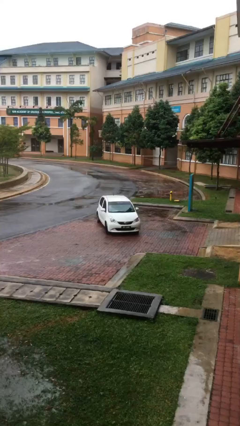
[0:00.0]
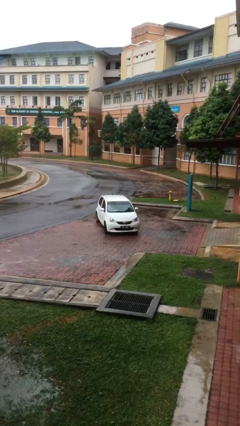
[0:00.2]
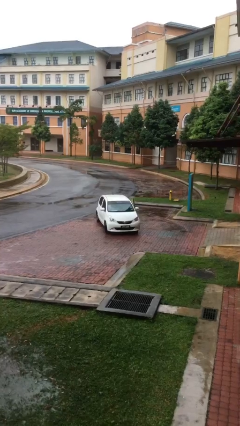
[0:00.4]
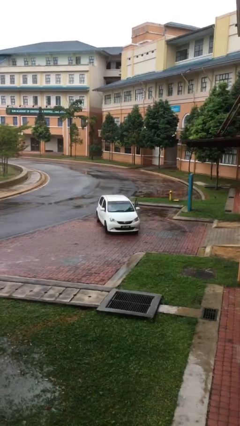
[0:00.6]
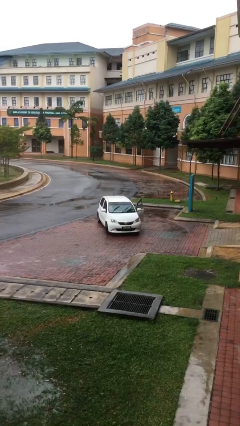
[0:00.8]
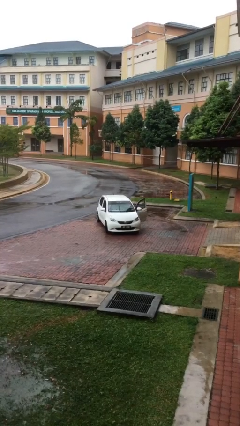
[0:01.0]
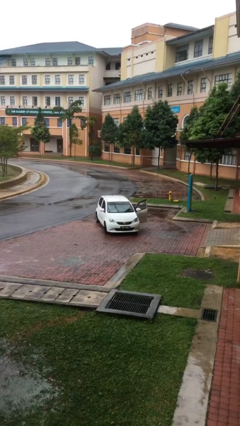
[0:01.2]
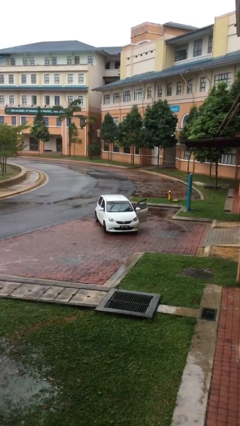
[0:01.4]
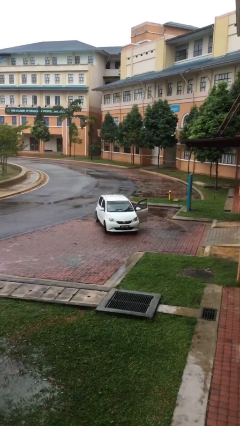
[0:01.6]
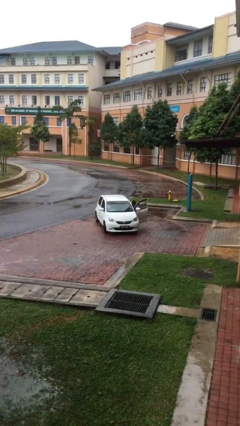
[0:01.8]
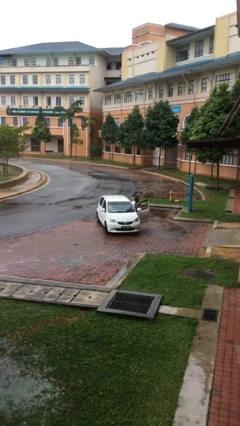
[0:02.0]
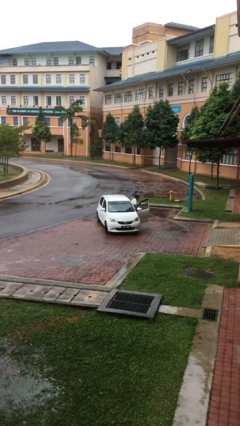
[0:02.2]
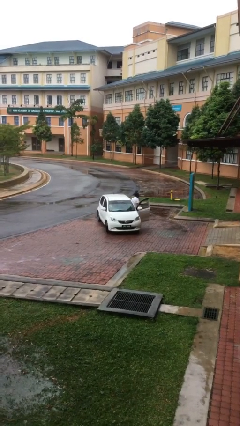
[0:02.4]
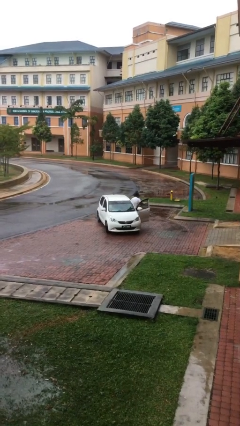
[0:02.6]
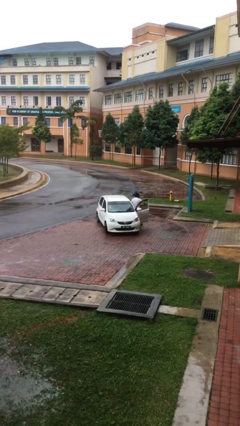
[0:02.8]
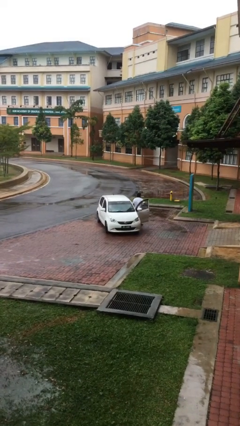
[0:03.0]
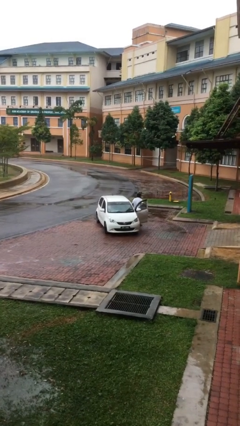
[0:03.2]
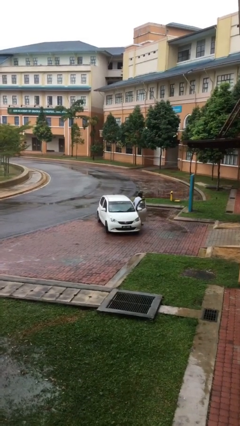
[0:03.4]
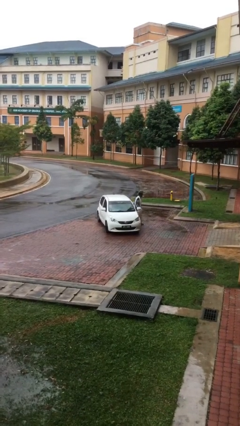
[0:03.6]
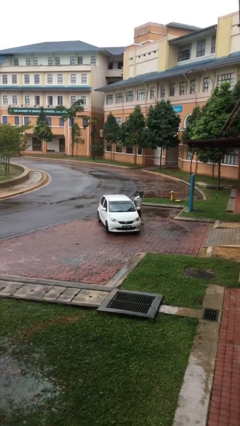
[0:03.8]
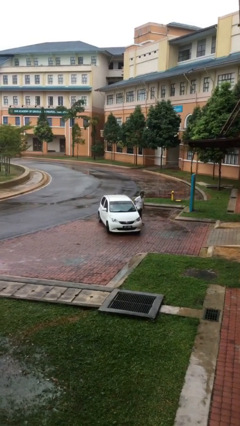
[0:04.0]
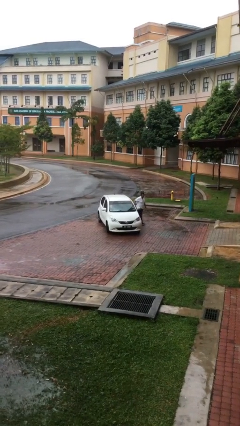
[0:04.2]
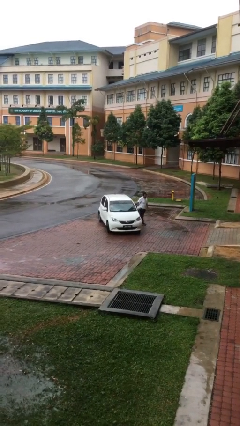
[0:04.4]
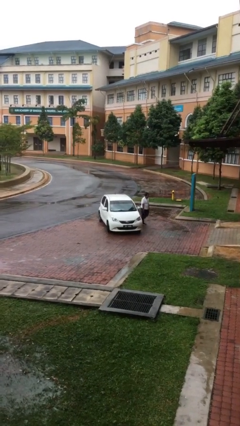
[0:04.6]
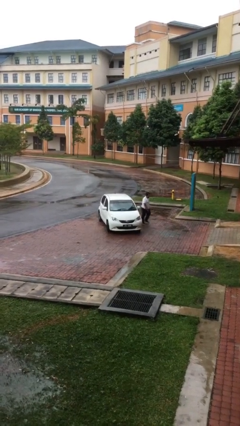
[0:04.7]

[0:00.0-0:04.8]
car drops off person

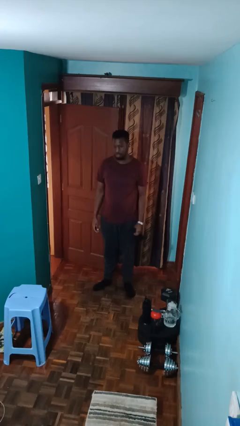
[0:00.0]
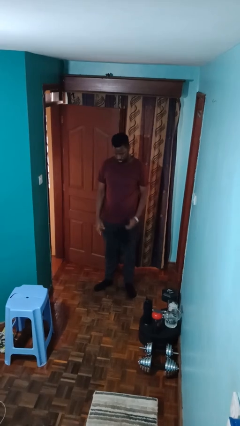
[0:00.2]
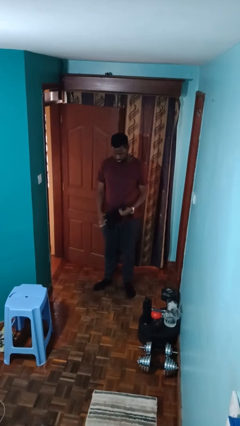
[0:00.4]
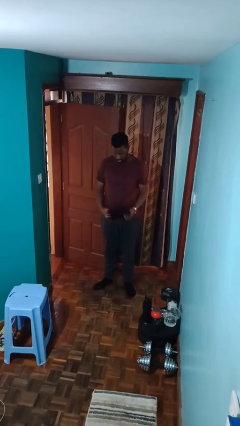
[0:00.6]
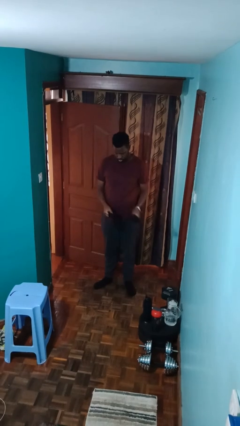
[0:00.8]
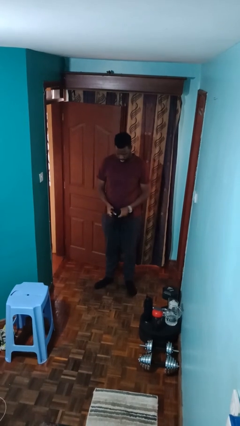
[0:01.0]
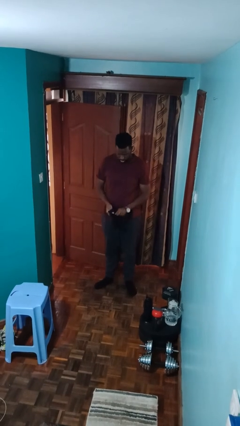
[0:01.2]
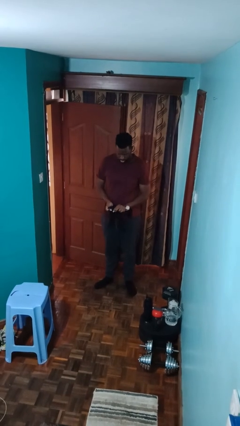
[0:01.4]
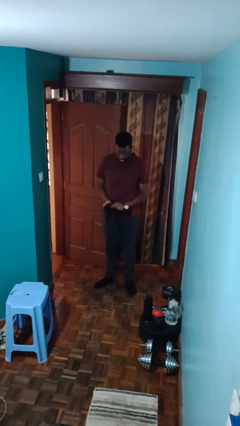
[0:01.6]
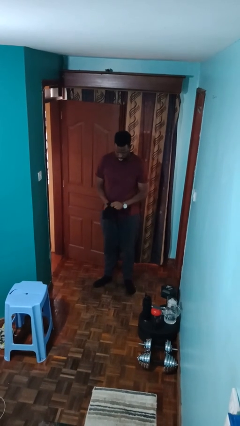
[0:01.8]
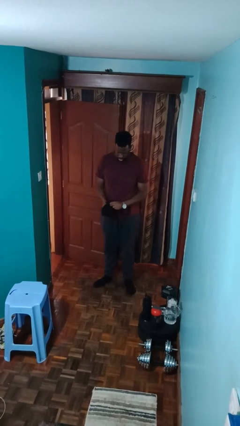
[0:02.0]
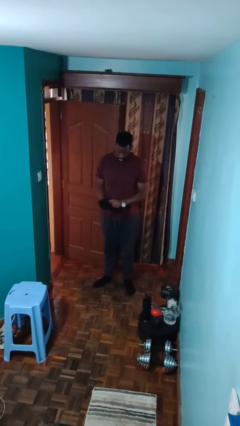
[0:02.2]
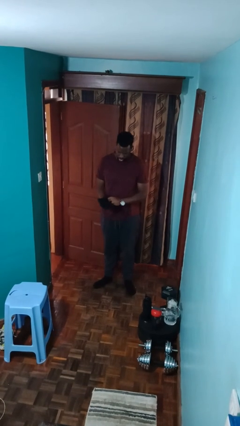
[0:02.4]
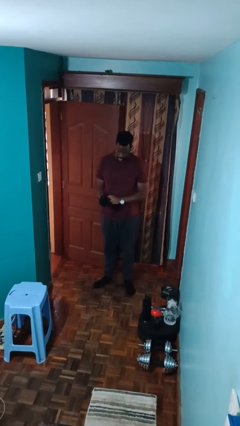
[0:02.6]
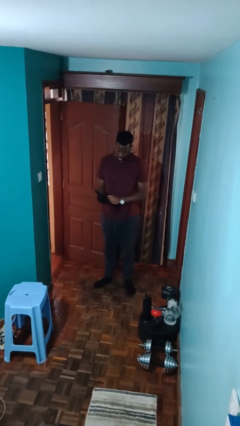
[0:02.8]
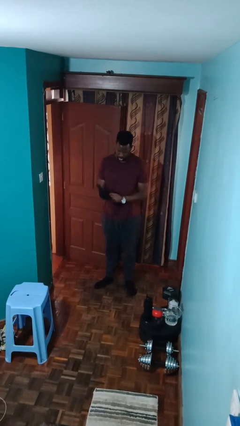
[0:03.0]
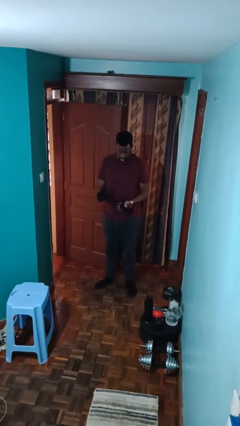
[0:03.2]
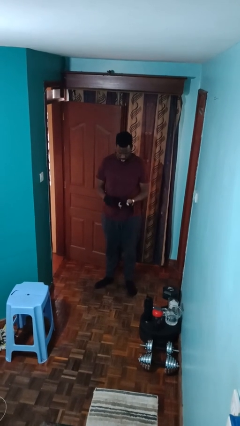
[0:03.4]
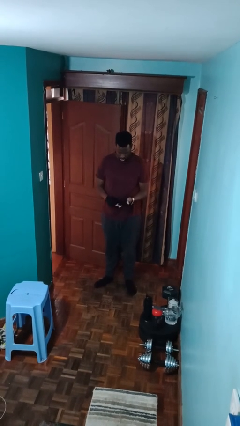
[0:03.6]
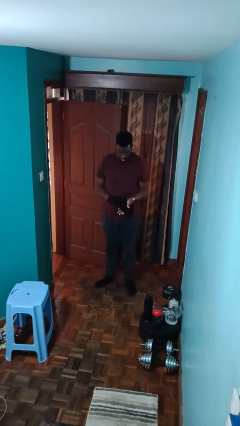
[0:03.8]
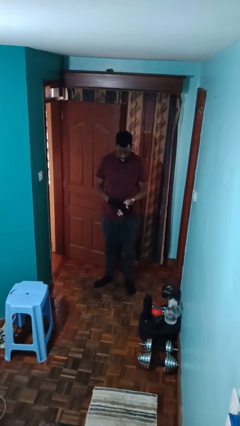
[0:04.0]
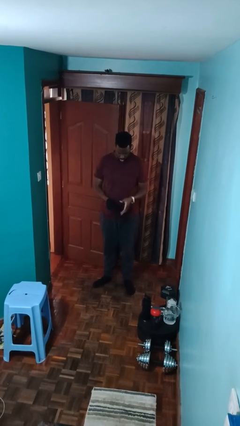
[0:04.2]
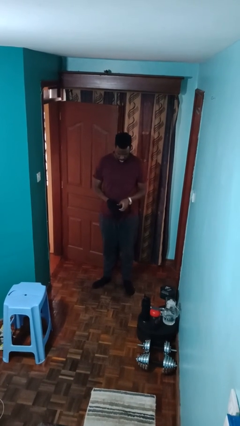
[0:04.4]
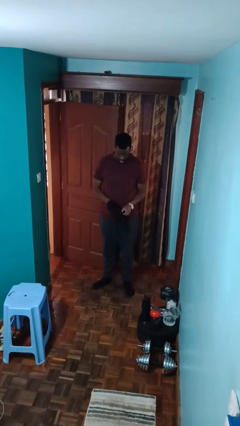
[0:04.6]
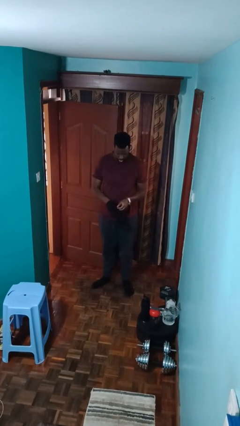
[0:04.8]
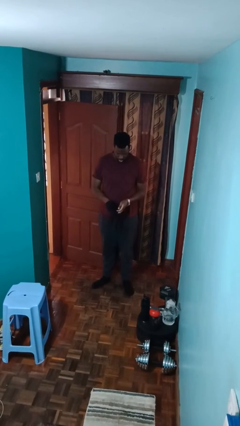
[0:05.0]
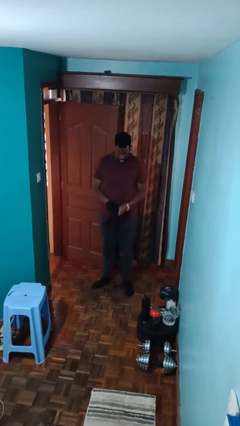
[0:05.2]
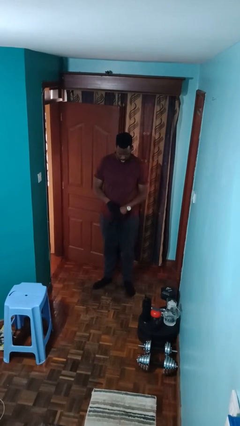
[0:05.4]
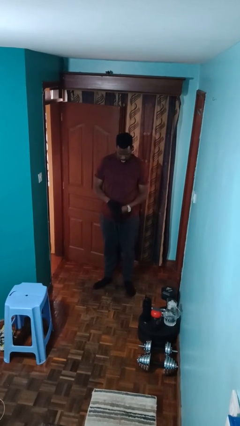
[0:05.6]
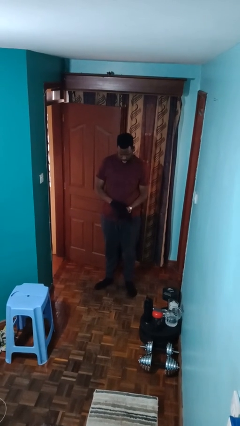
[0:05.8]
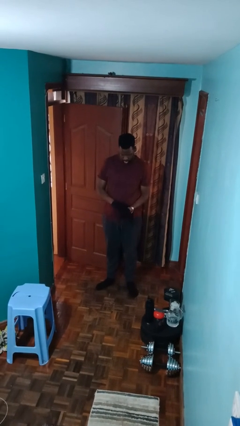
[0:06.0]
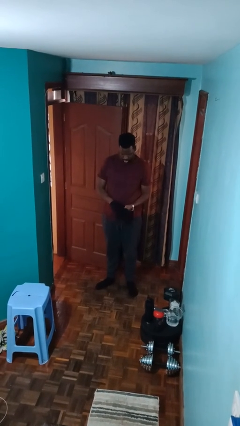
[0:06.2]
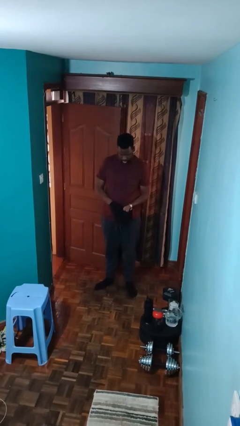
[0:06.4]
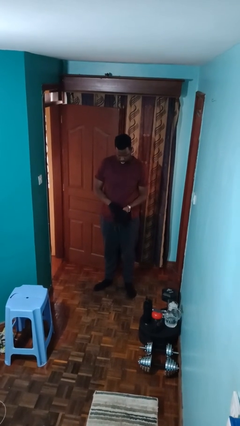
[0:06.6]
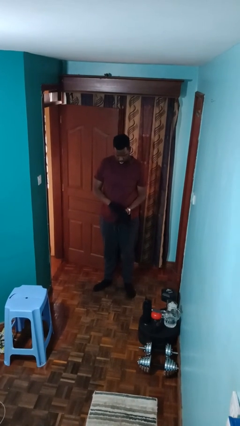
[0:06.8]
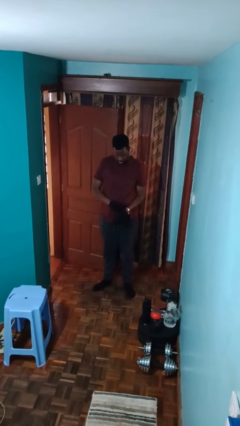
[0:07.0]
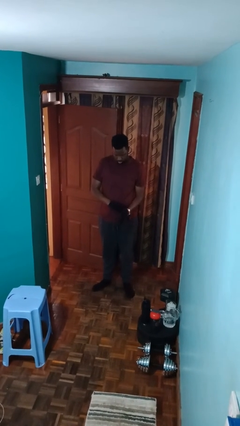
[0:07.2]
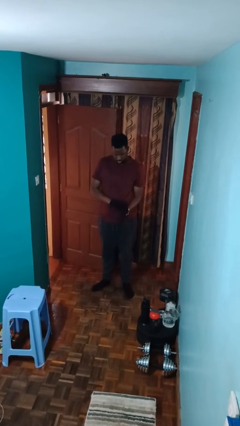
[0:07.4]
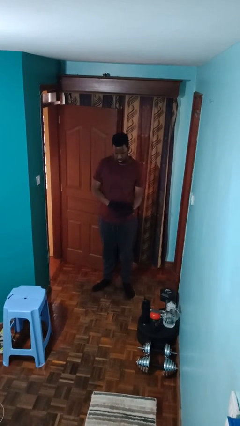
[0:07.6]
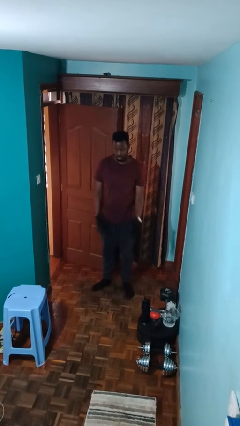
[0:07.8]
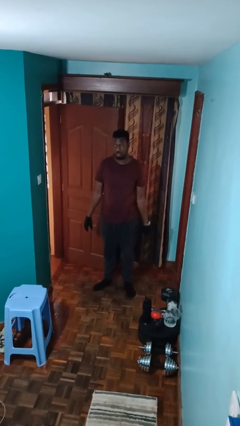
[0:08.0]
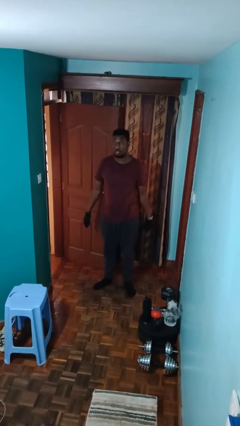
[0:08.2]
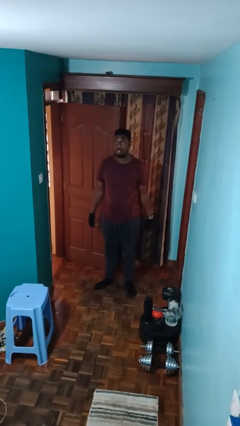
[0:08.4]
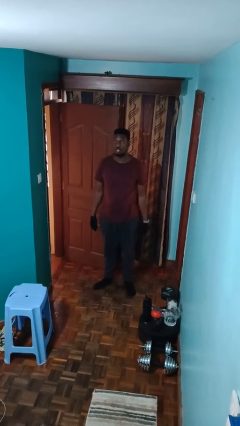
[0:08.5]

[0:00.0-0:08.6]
person puts on gloves

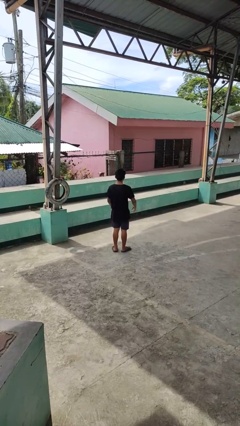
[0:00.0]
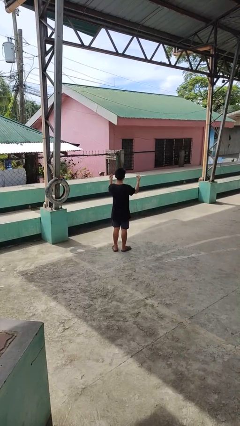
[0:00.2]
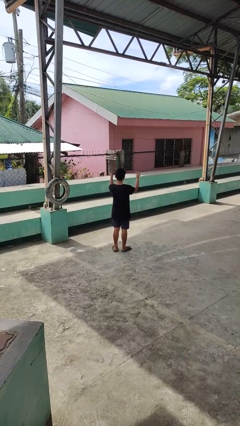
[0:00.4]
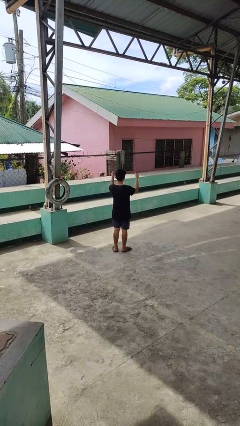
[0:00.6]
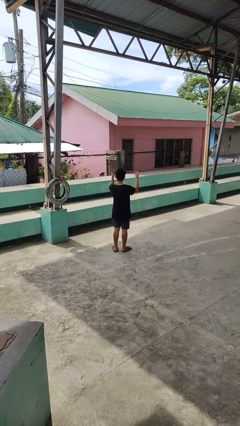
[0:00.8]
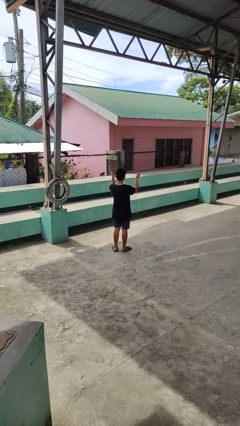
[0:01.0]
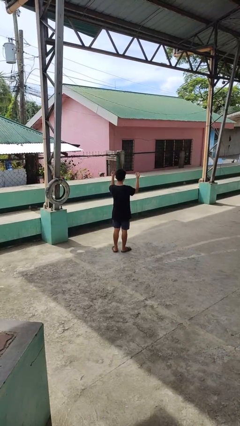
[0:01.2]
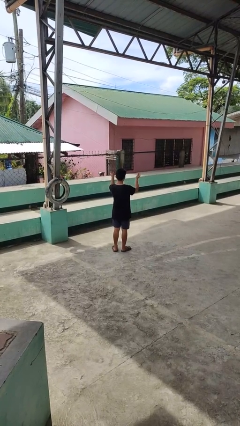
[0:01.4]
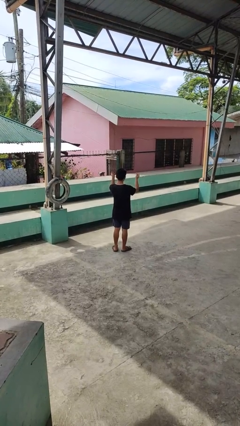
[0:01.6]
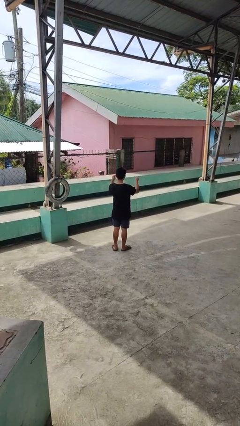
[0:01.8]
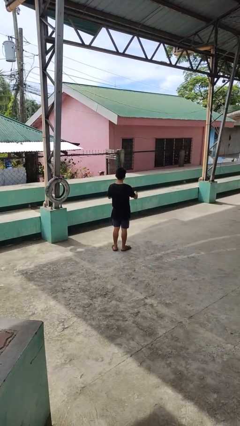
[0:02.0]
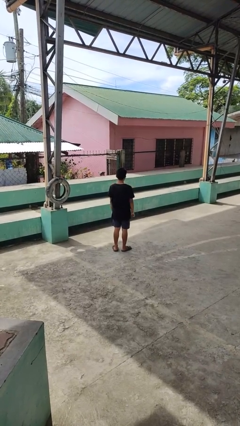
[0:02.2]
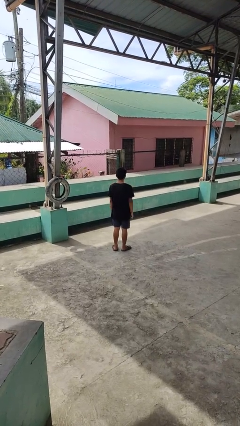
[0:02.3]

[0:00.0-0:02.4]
person snaps fingers

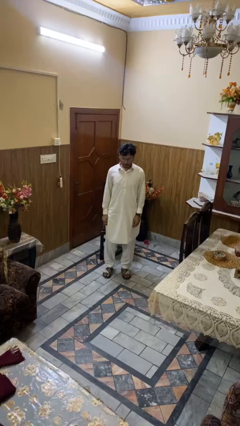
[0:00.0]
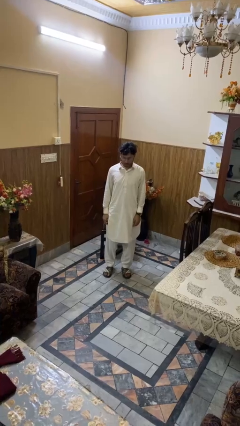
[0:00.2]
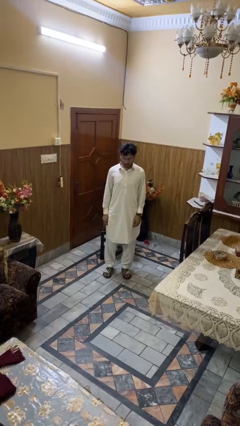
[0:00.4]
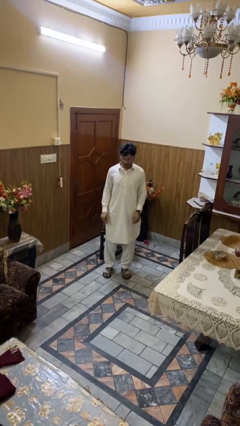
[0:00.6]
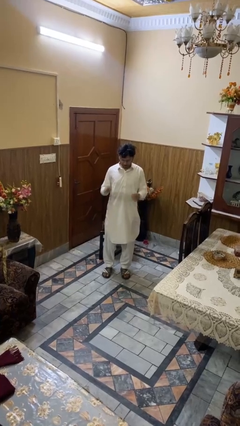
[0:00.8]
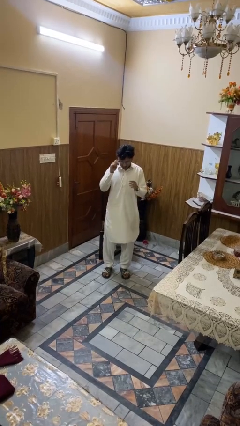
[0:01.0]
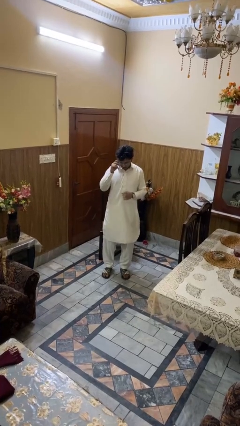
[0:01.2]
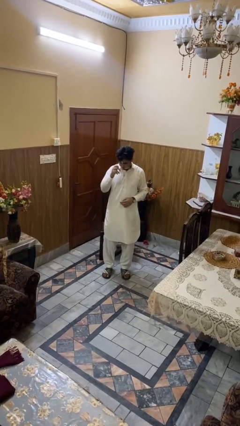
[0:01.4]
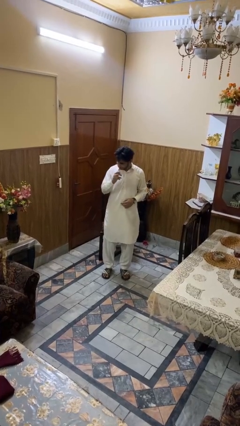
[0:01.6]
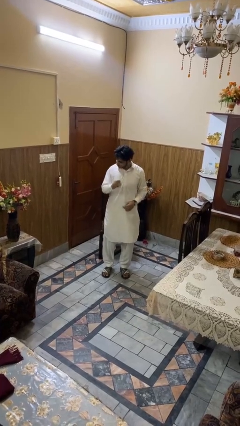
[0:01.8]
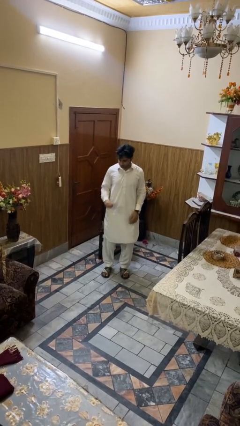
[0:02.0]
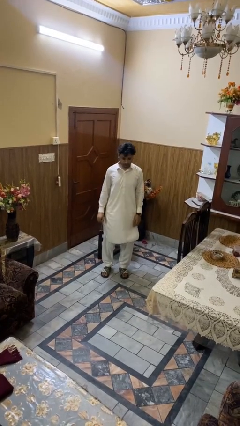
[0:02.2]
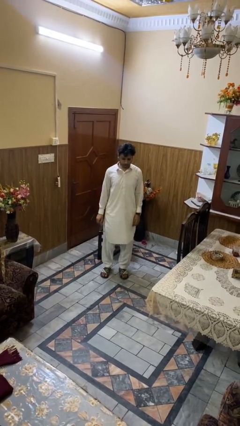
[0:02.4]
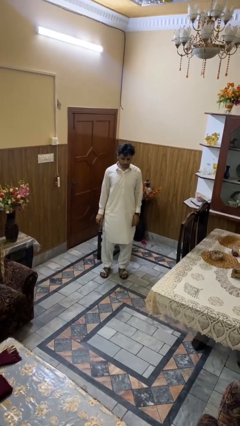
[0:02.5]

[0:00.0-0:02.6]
person takes off glasses
